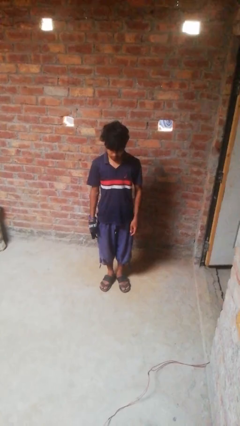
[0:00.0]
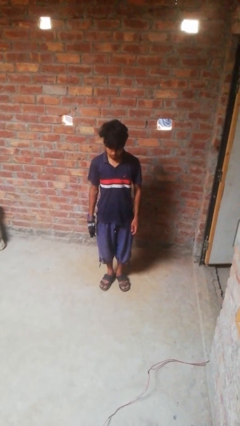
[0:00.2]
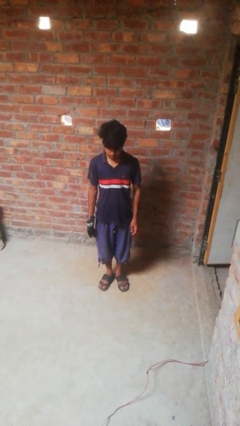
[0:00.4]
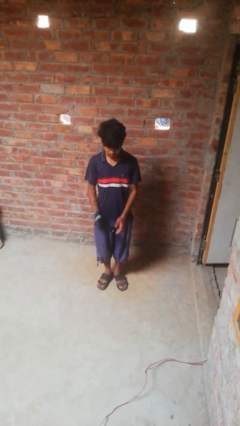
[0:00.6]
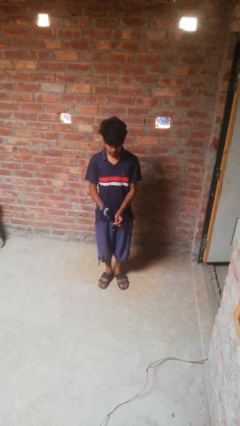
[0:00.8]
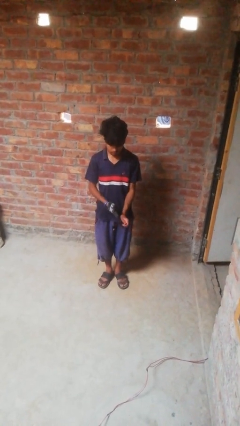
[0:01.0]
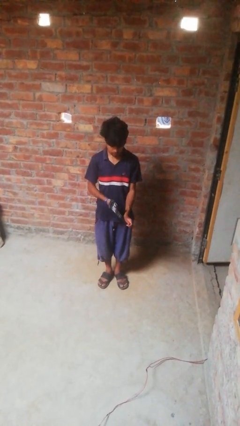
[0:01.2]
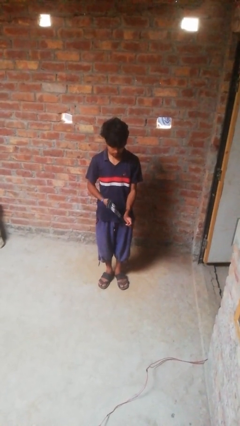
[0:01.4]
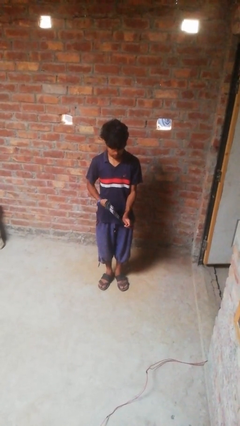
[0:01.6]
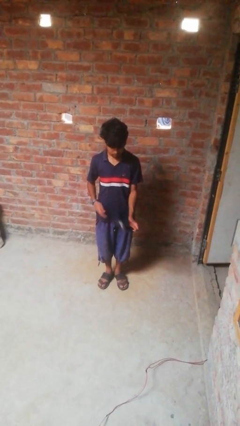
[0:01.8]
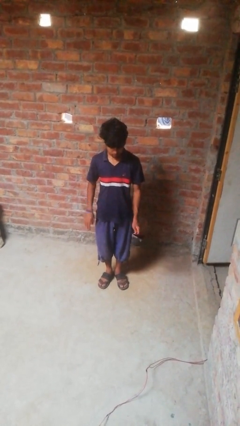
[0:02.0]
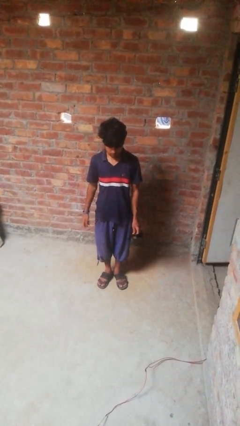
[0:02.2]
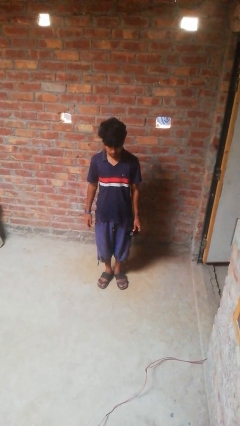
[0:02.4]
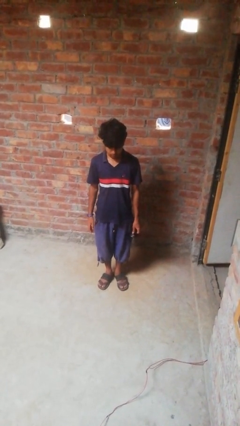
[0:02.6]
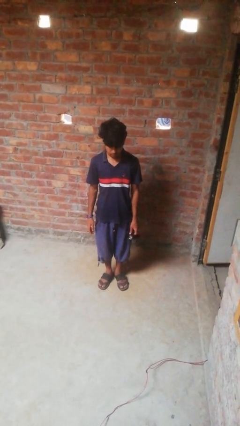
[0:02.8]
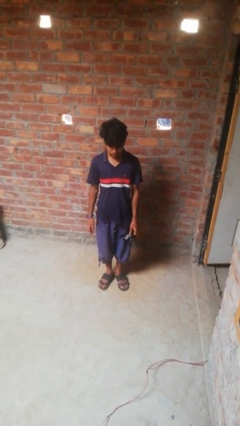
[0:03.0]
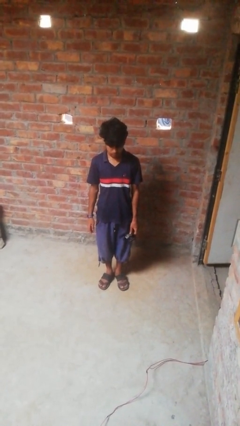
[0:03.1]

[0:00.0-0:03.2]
person takes off gloves

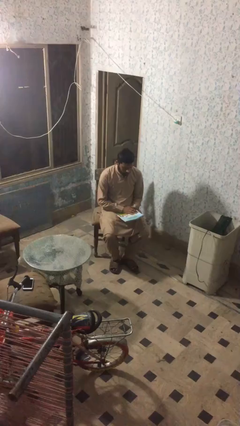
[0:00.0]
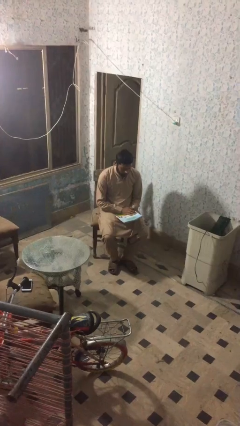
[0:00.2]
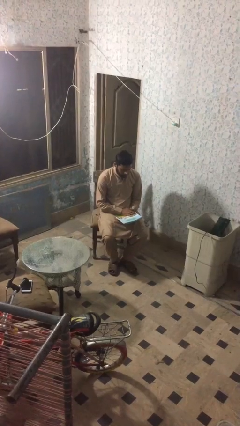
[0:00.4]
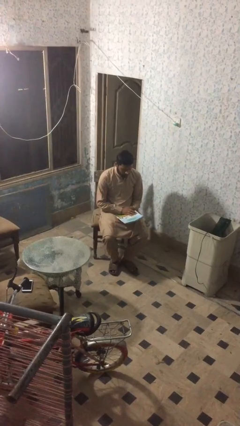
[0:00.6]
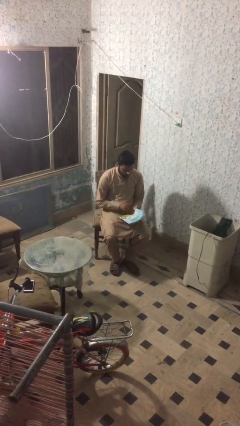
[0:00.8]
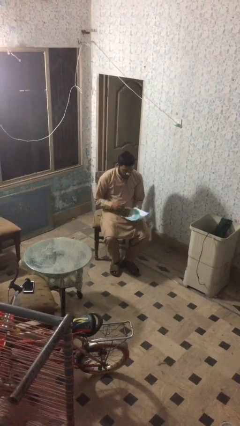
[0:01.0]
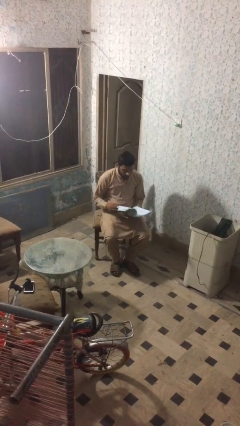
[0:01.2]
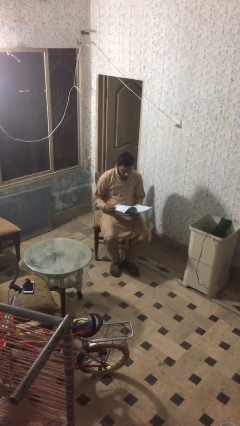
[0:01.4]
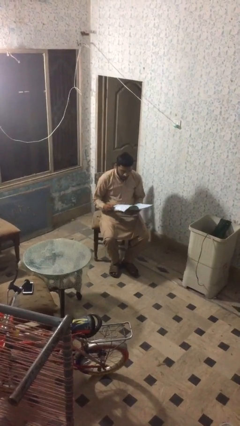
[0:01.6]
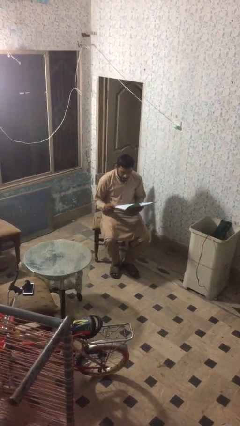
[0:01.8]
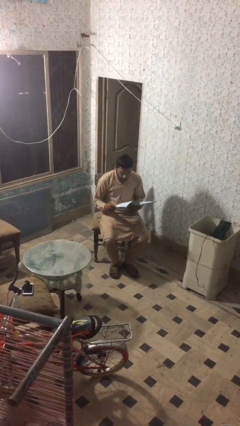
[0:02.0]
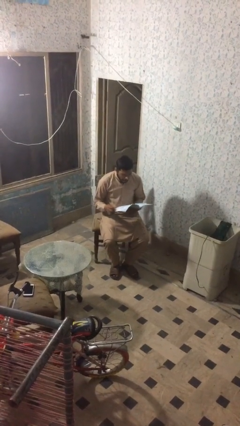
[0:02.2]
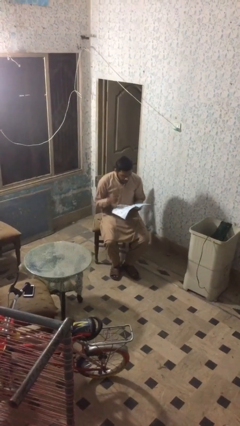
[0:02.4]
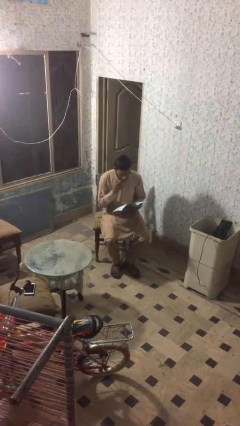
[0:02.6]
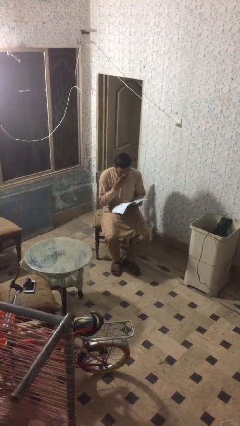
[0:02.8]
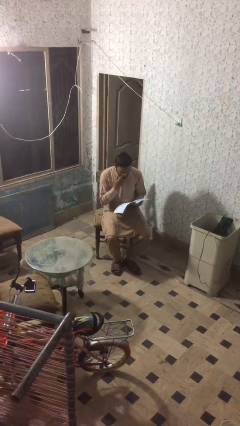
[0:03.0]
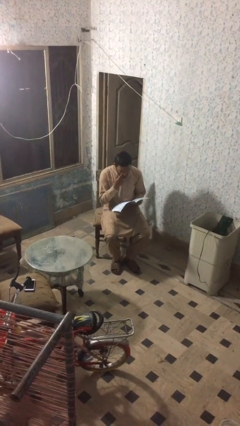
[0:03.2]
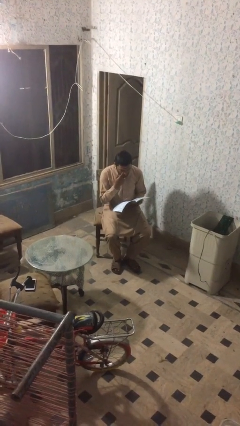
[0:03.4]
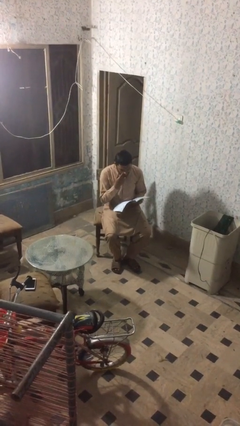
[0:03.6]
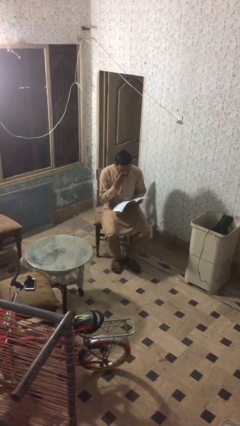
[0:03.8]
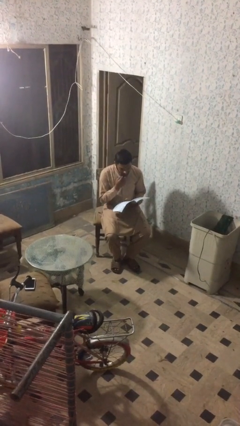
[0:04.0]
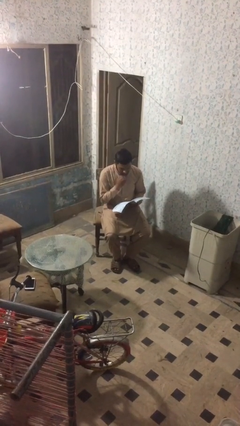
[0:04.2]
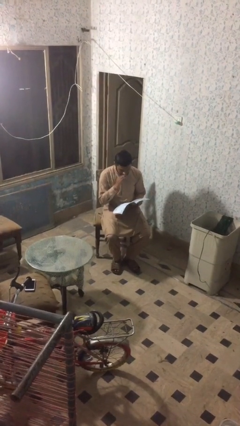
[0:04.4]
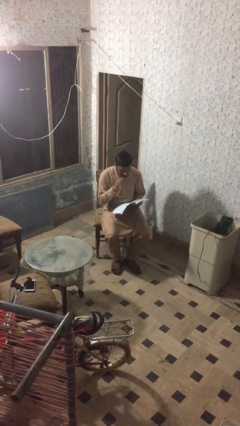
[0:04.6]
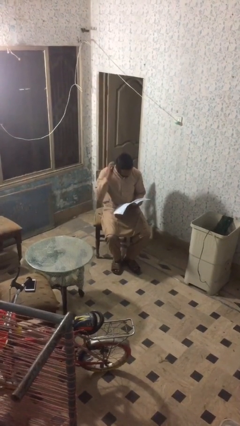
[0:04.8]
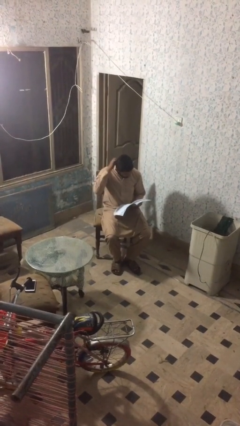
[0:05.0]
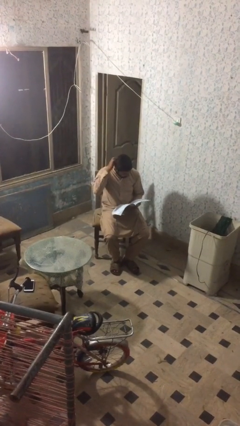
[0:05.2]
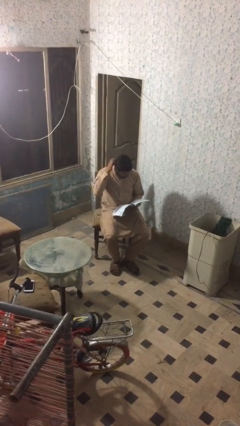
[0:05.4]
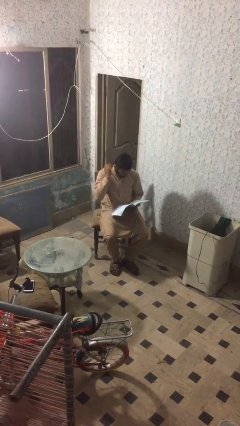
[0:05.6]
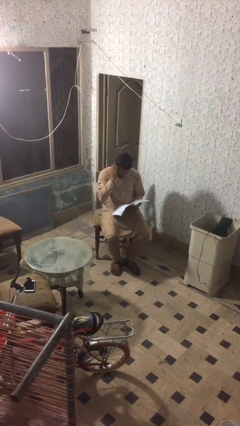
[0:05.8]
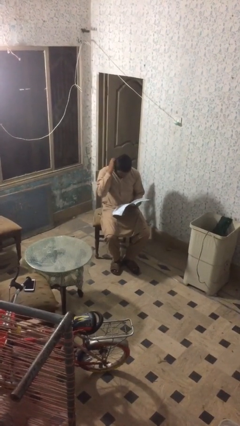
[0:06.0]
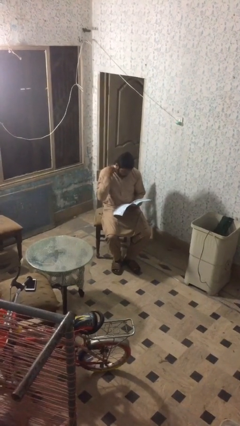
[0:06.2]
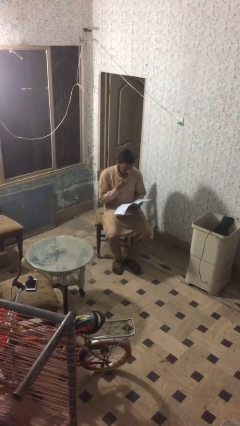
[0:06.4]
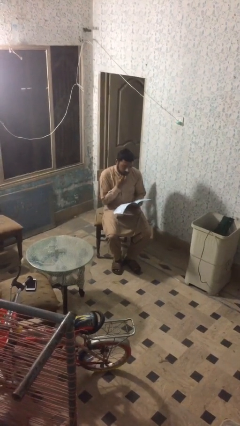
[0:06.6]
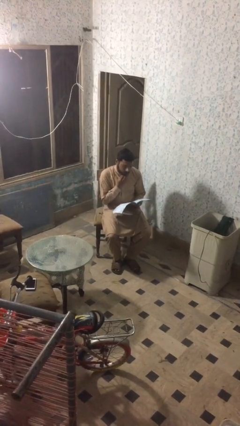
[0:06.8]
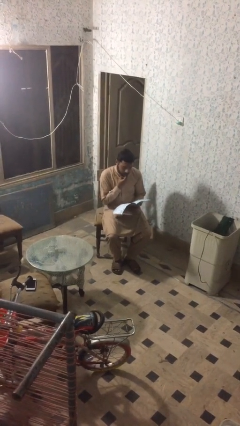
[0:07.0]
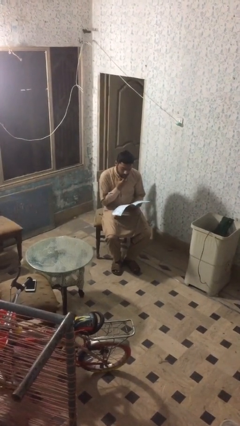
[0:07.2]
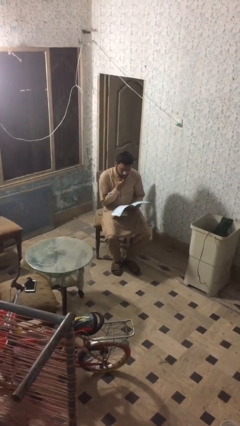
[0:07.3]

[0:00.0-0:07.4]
person reads document

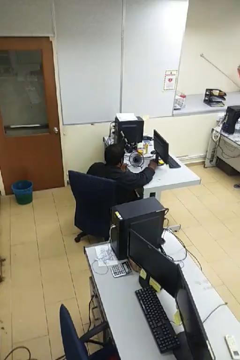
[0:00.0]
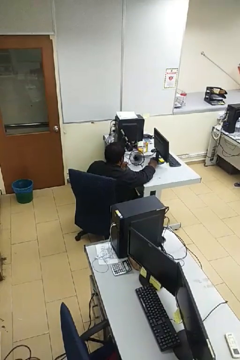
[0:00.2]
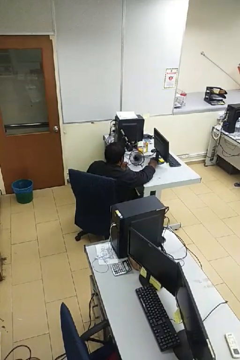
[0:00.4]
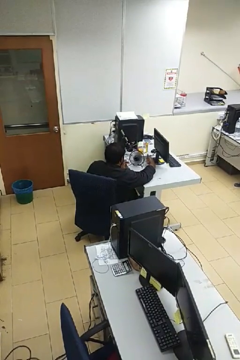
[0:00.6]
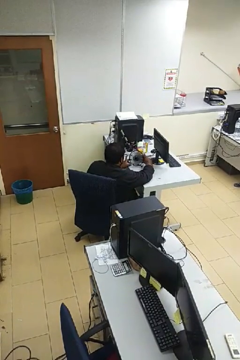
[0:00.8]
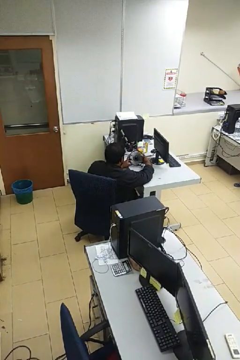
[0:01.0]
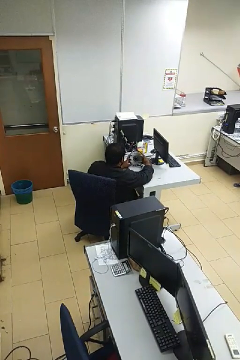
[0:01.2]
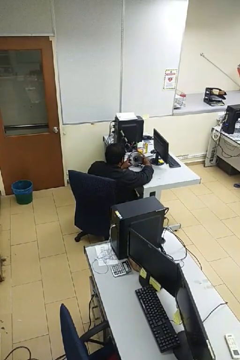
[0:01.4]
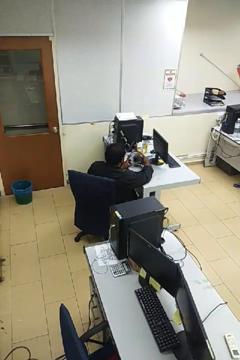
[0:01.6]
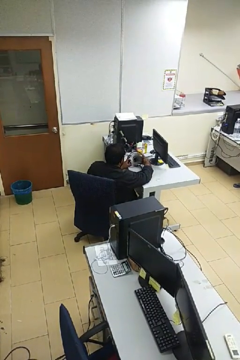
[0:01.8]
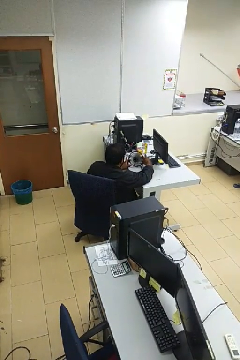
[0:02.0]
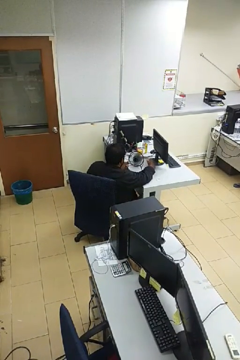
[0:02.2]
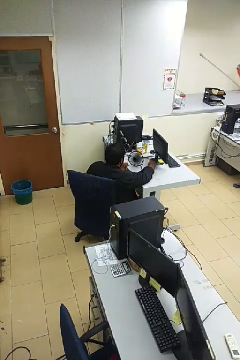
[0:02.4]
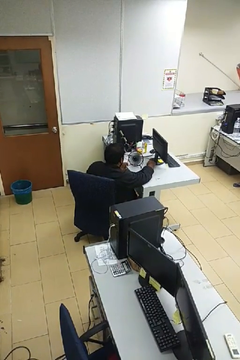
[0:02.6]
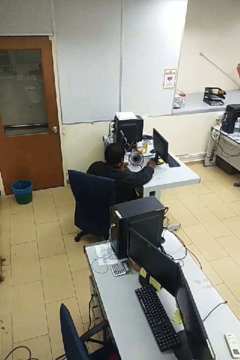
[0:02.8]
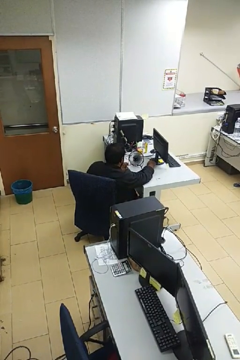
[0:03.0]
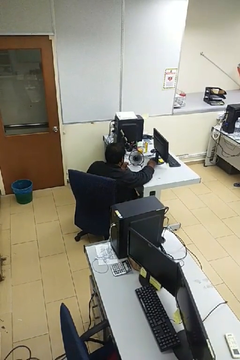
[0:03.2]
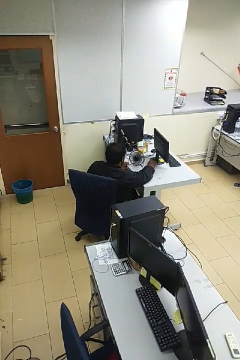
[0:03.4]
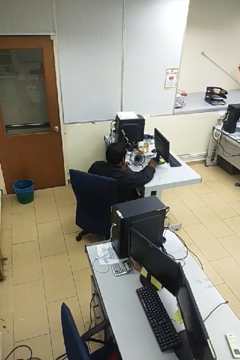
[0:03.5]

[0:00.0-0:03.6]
person turns off fan

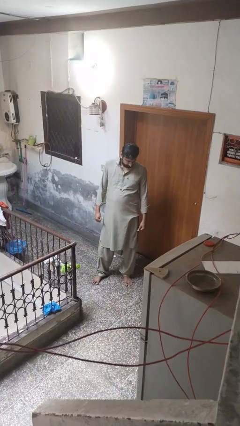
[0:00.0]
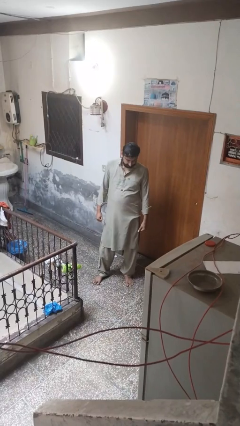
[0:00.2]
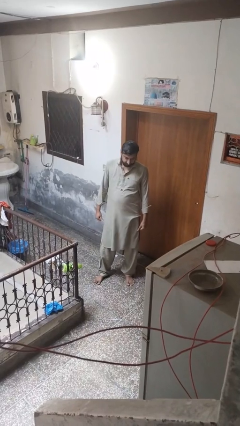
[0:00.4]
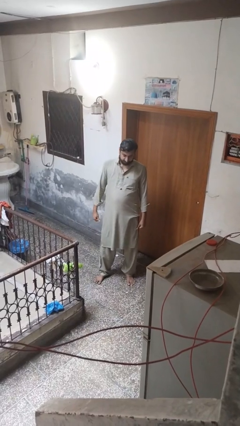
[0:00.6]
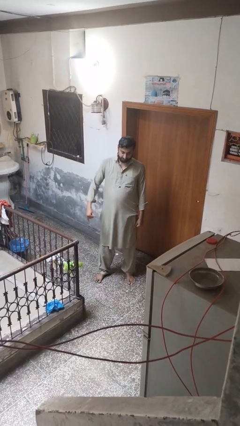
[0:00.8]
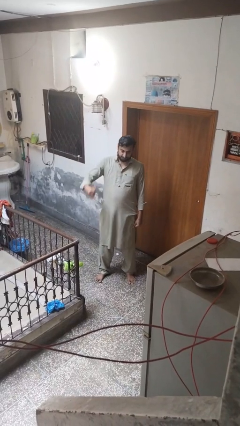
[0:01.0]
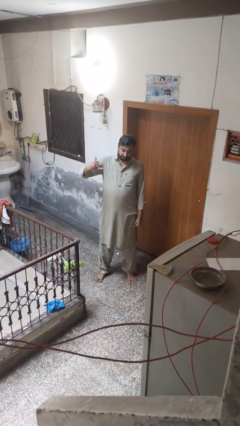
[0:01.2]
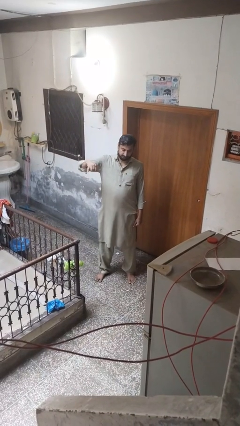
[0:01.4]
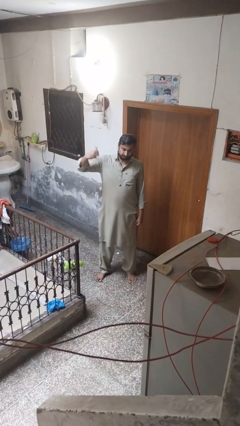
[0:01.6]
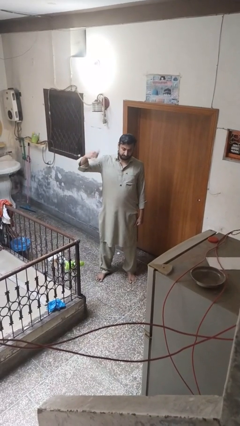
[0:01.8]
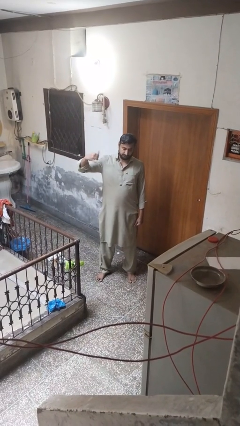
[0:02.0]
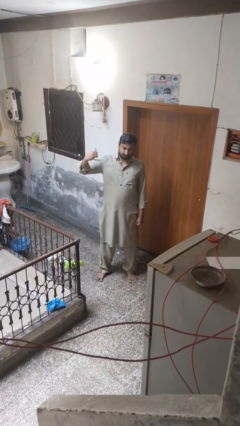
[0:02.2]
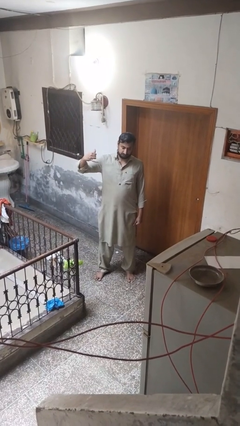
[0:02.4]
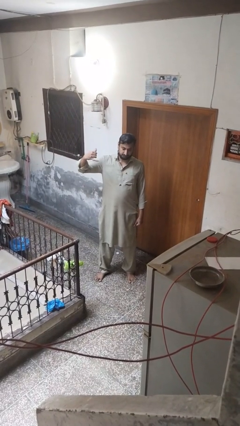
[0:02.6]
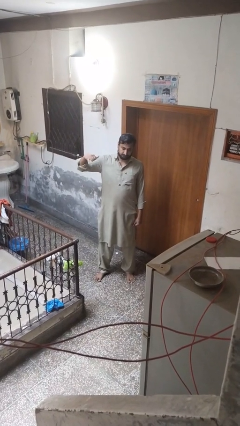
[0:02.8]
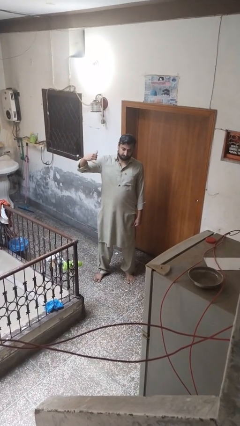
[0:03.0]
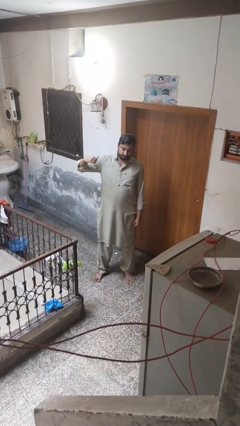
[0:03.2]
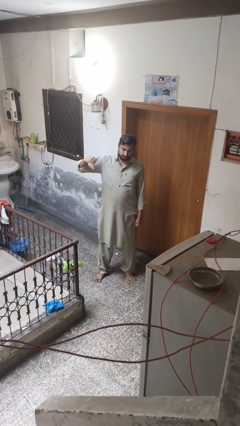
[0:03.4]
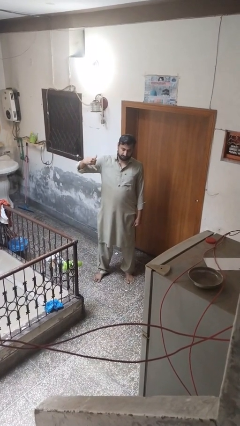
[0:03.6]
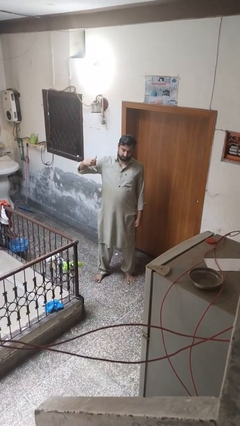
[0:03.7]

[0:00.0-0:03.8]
person gestures hang loose
